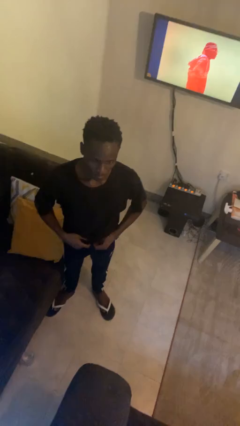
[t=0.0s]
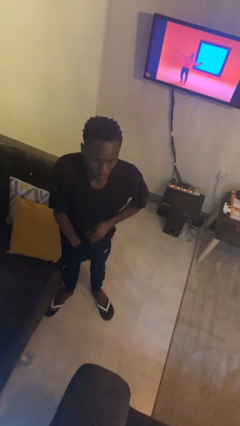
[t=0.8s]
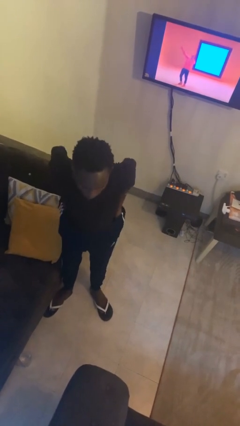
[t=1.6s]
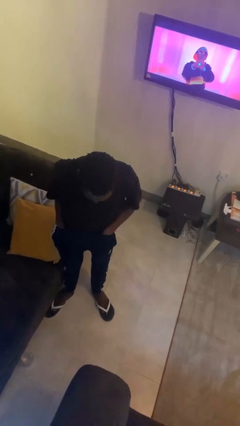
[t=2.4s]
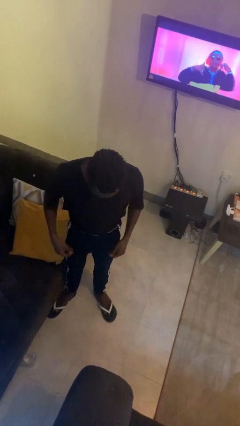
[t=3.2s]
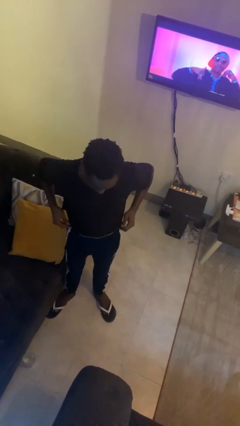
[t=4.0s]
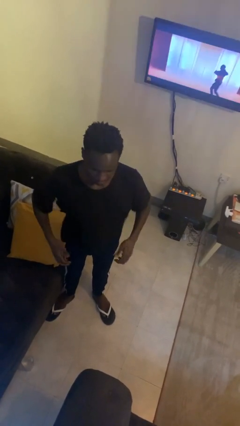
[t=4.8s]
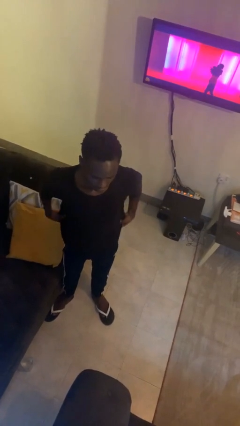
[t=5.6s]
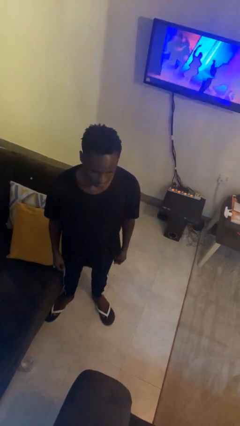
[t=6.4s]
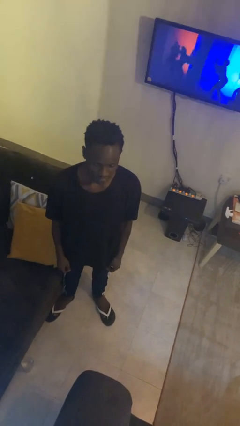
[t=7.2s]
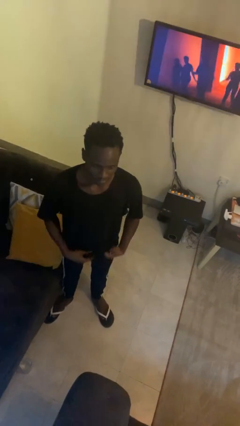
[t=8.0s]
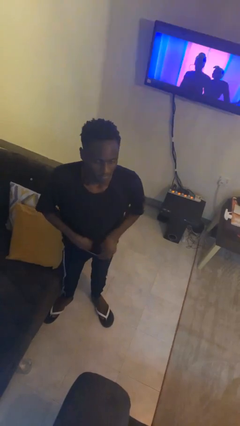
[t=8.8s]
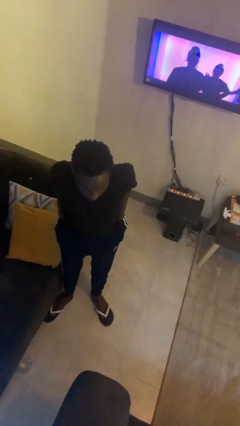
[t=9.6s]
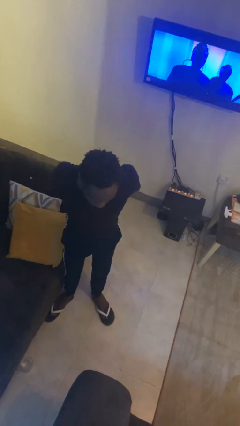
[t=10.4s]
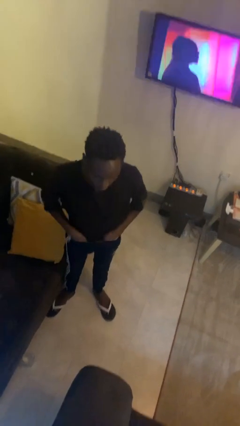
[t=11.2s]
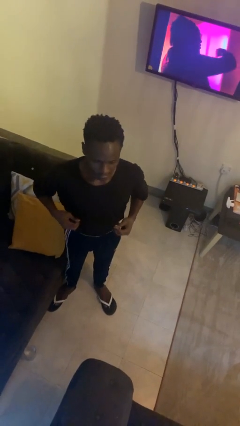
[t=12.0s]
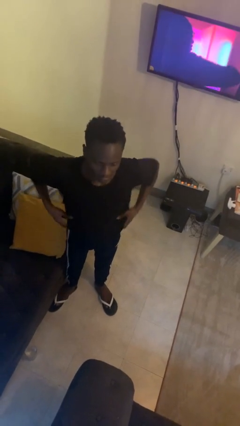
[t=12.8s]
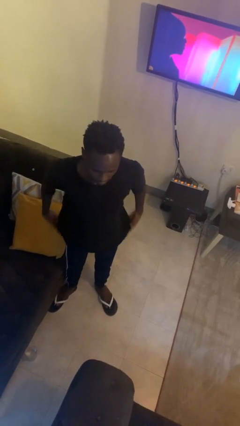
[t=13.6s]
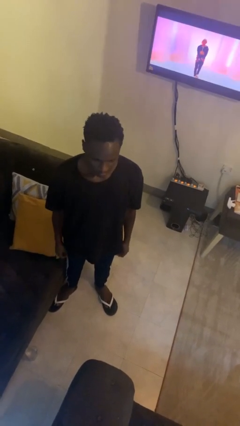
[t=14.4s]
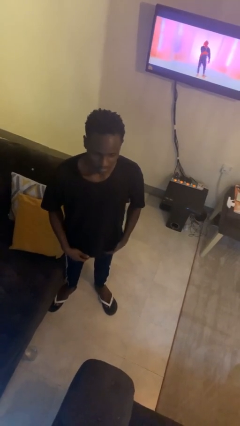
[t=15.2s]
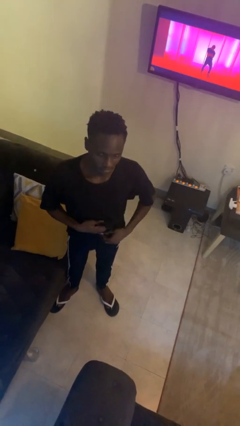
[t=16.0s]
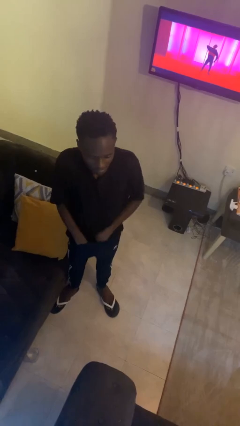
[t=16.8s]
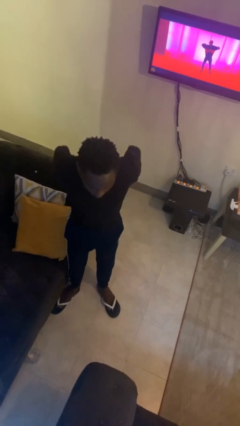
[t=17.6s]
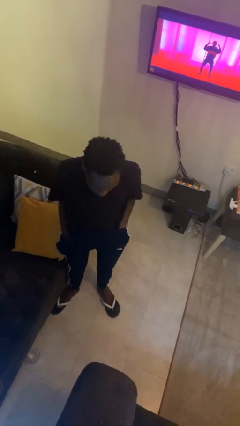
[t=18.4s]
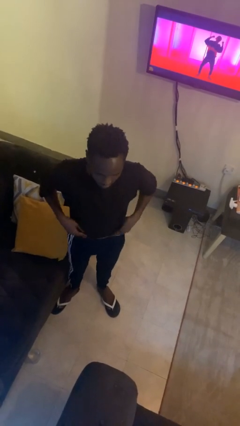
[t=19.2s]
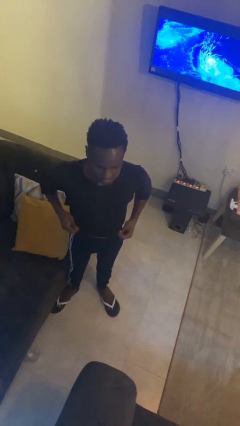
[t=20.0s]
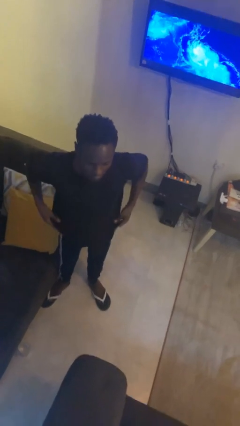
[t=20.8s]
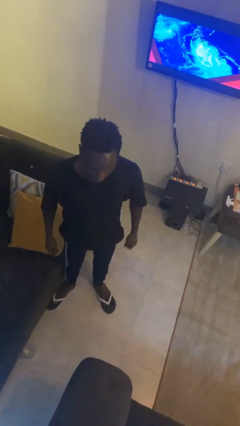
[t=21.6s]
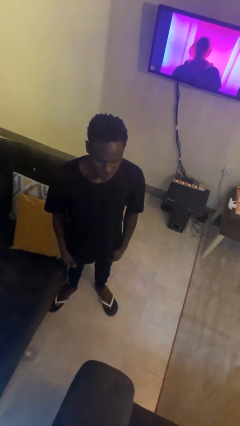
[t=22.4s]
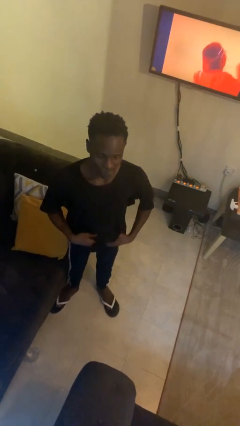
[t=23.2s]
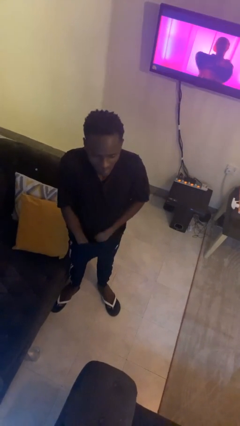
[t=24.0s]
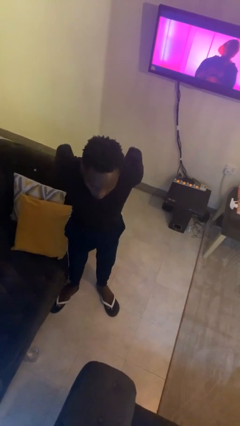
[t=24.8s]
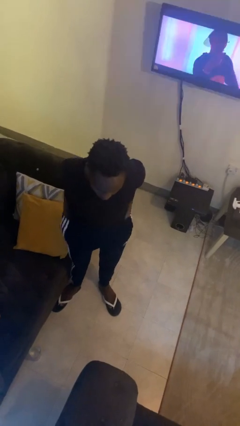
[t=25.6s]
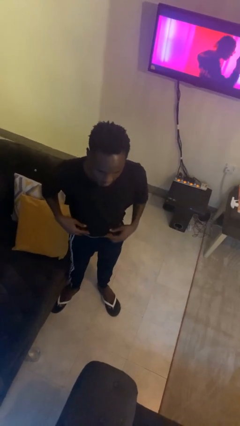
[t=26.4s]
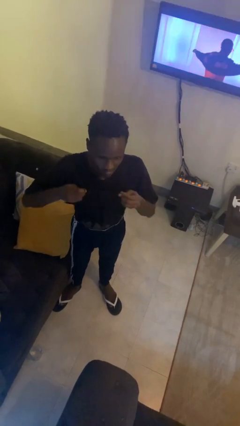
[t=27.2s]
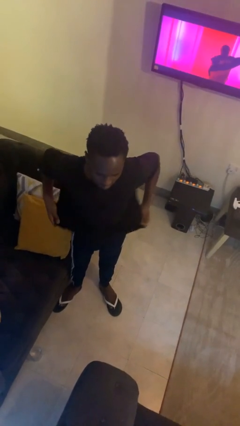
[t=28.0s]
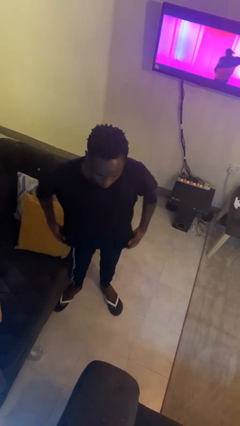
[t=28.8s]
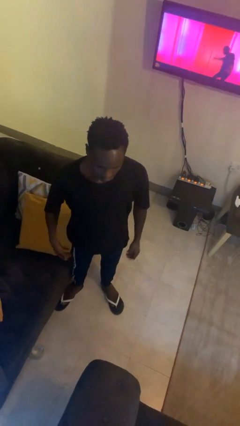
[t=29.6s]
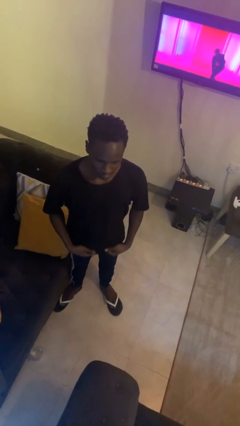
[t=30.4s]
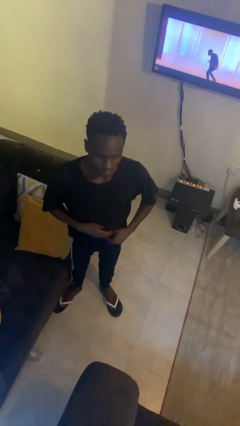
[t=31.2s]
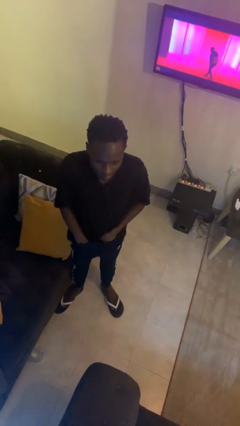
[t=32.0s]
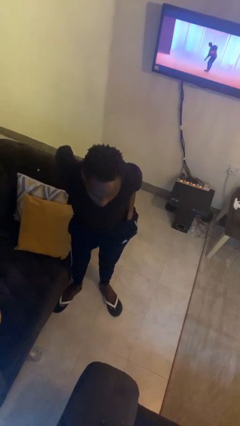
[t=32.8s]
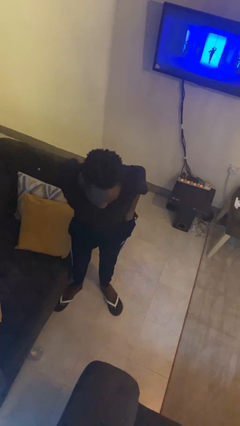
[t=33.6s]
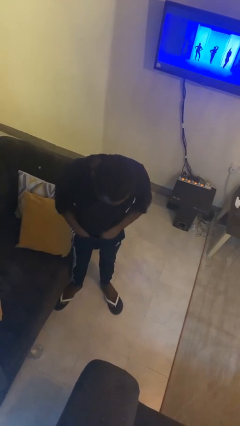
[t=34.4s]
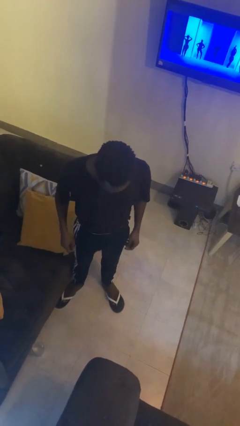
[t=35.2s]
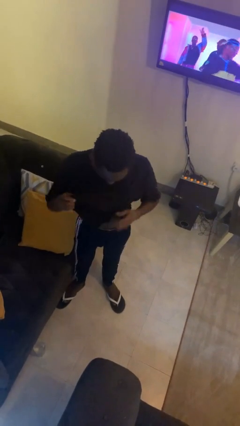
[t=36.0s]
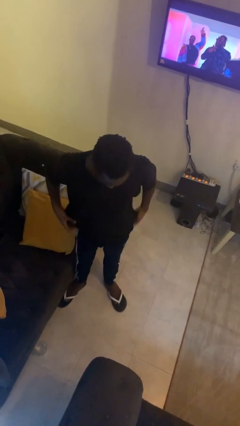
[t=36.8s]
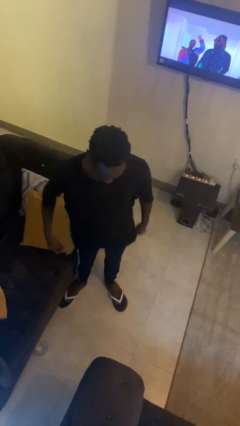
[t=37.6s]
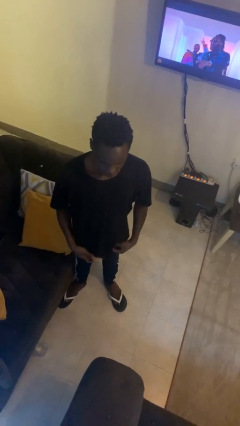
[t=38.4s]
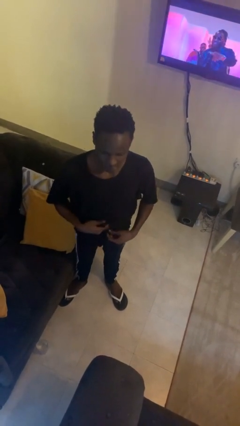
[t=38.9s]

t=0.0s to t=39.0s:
person tucks in shirt

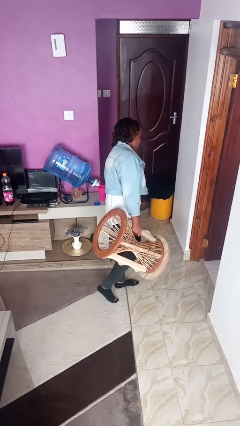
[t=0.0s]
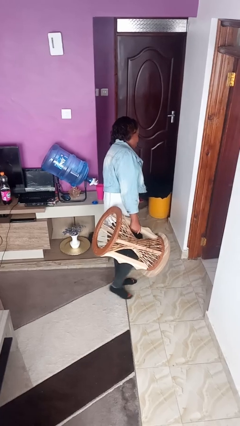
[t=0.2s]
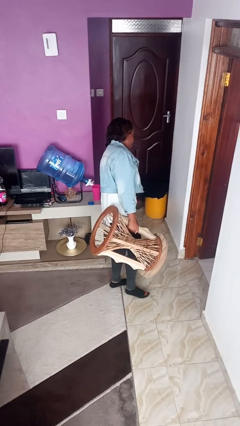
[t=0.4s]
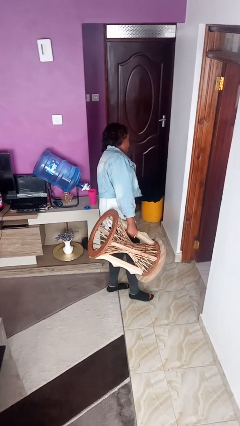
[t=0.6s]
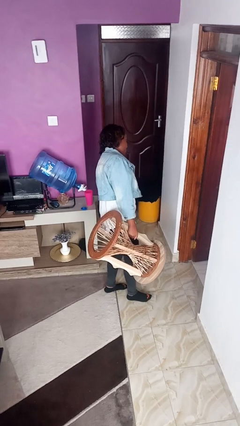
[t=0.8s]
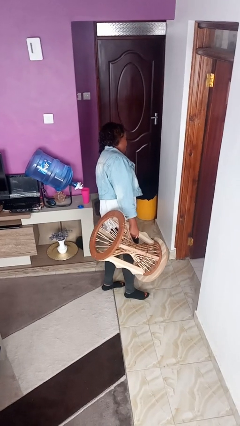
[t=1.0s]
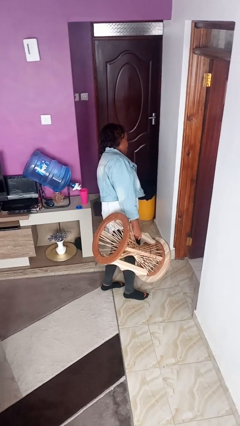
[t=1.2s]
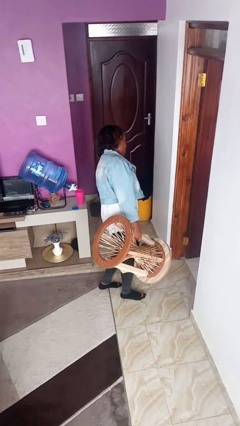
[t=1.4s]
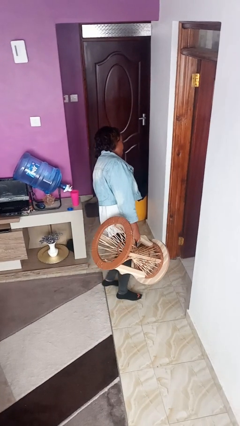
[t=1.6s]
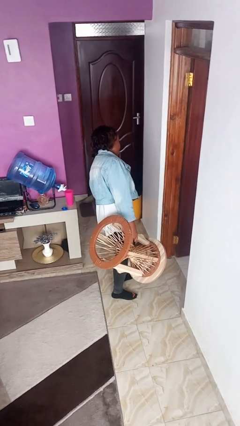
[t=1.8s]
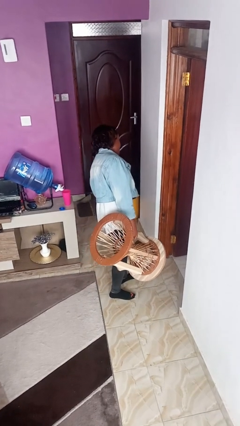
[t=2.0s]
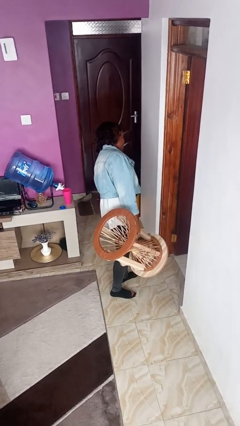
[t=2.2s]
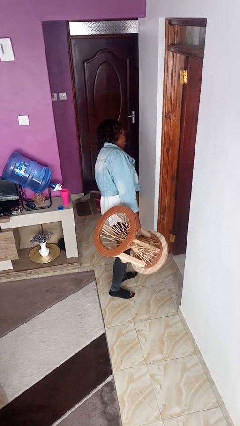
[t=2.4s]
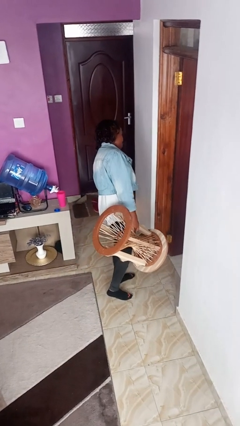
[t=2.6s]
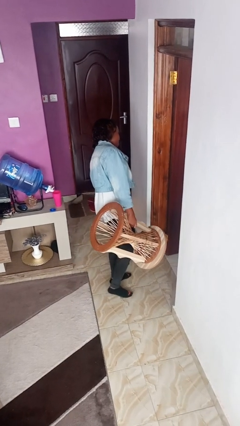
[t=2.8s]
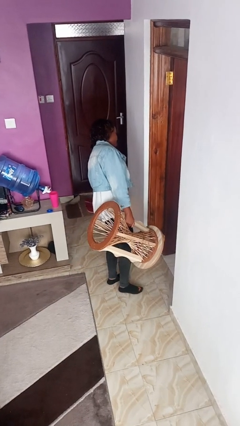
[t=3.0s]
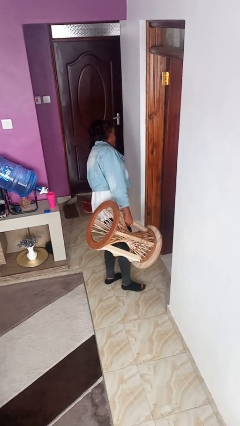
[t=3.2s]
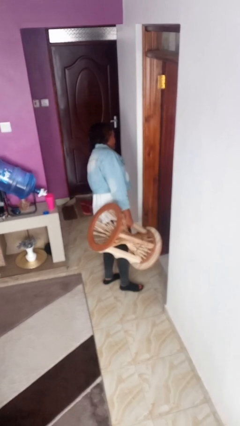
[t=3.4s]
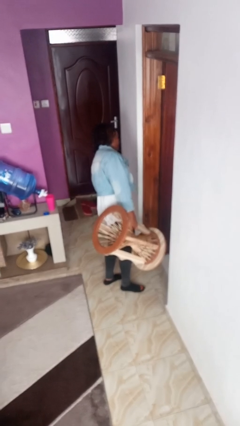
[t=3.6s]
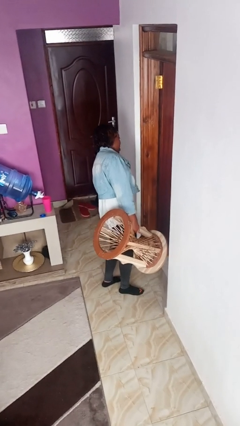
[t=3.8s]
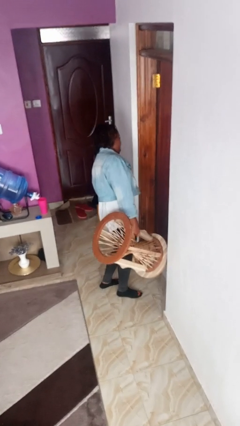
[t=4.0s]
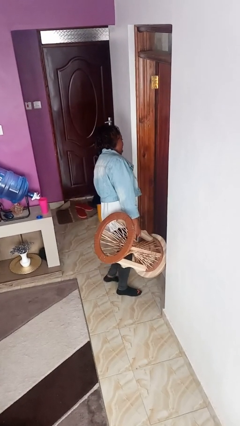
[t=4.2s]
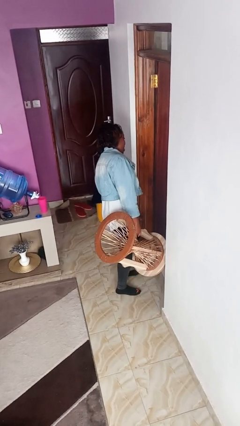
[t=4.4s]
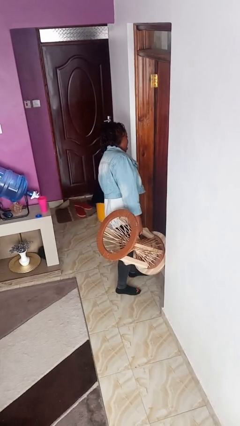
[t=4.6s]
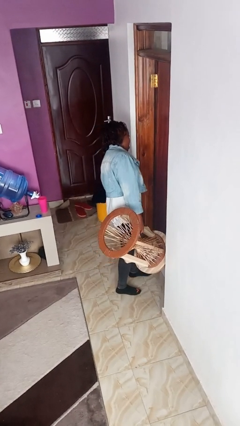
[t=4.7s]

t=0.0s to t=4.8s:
person carries furniture

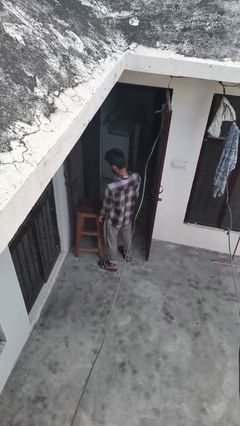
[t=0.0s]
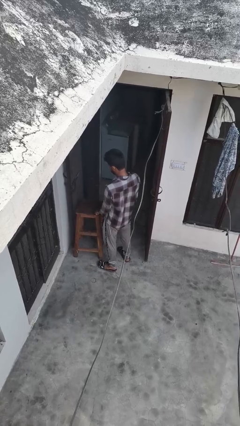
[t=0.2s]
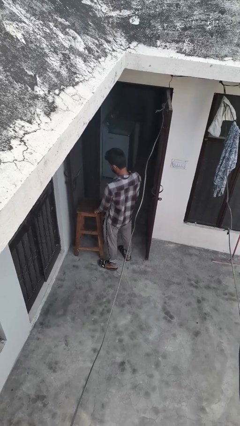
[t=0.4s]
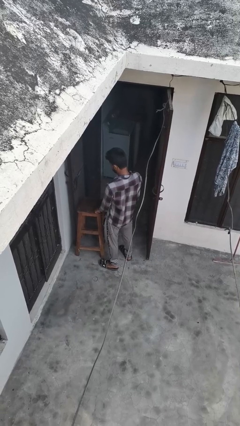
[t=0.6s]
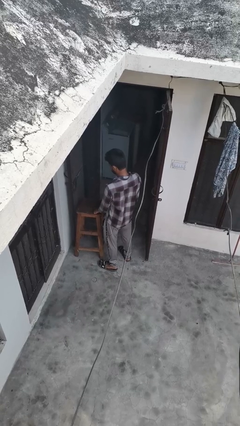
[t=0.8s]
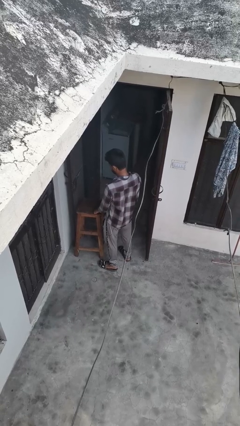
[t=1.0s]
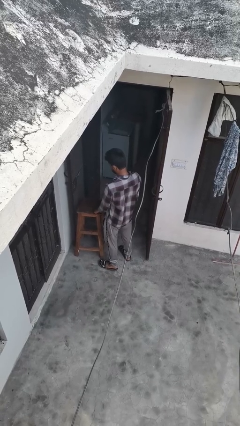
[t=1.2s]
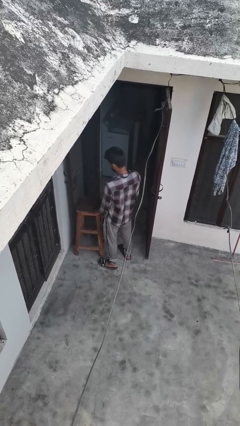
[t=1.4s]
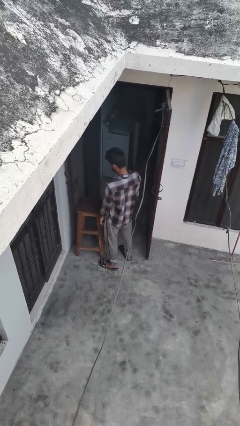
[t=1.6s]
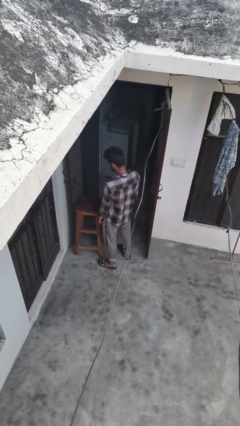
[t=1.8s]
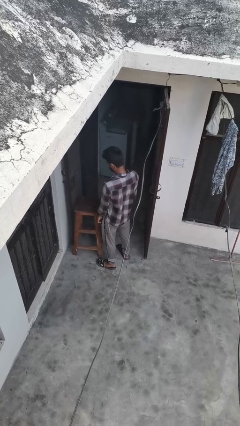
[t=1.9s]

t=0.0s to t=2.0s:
person taps object with finger

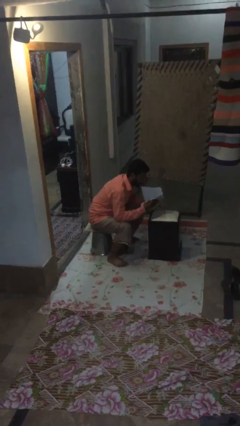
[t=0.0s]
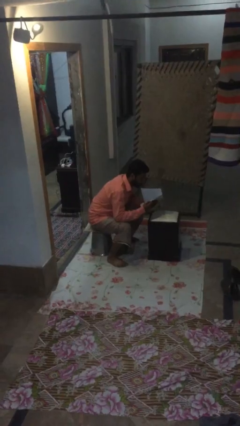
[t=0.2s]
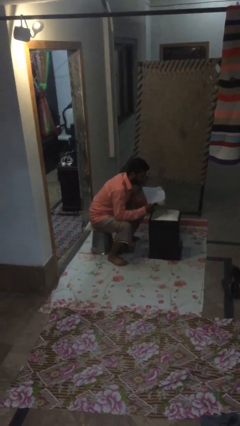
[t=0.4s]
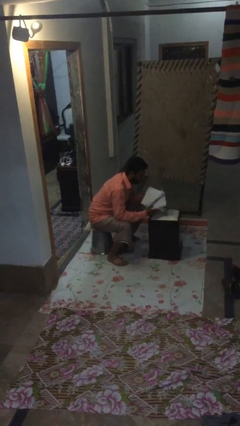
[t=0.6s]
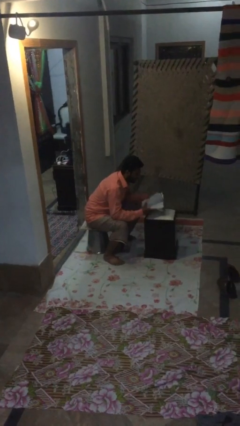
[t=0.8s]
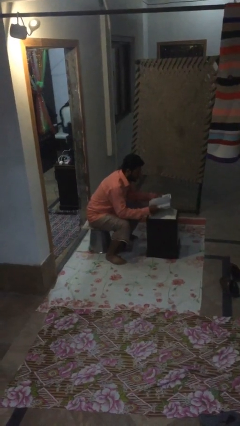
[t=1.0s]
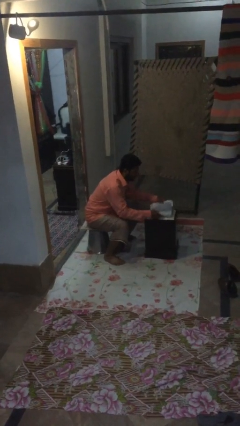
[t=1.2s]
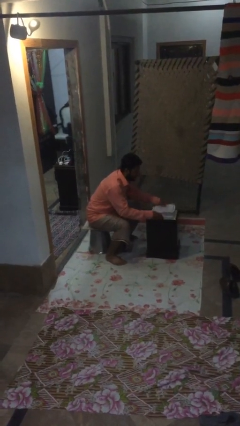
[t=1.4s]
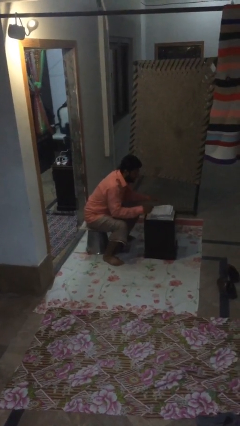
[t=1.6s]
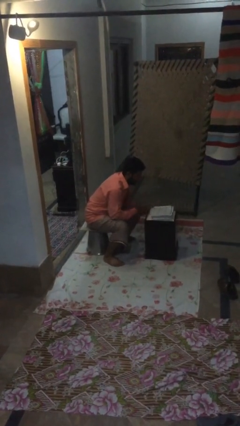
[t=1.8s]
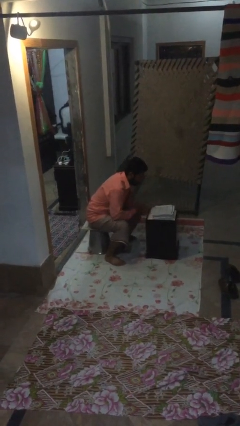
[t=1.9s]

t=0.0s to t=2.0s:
person puts down object on table
